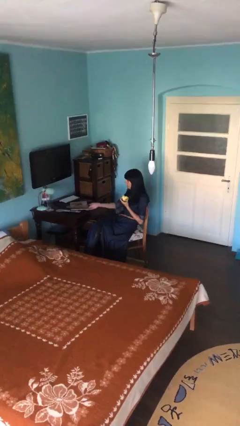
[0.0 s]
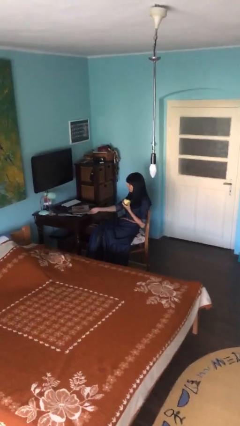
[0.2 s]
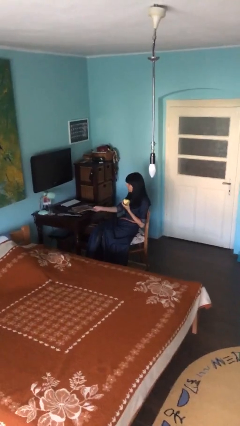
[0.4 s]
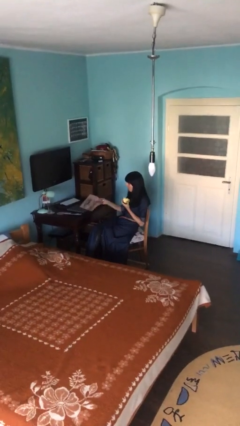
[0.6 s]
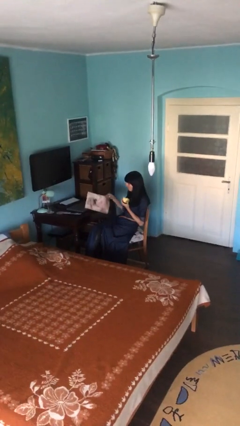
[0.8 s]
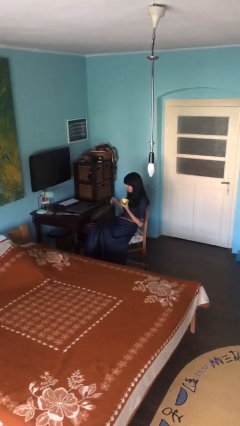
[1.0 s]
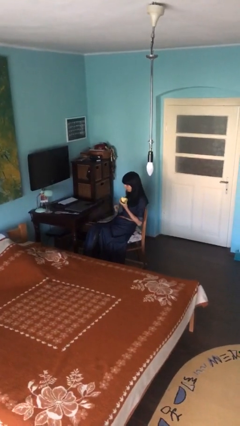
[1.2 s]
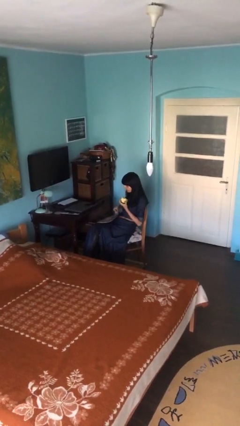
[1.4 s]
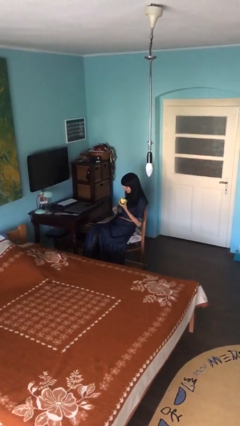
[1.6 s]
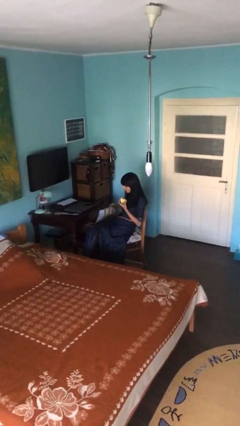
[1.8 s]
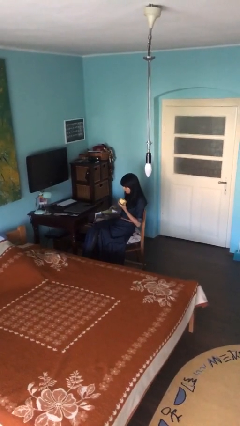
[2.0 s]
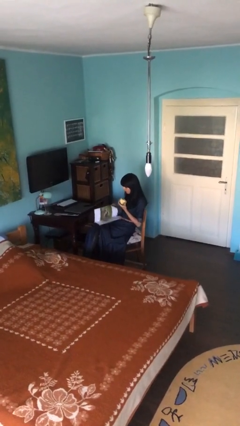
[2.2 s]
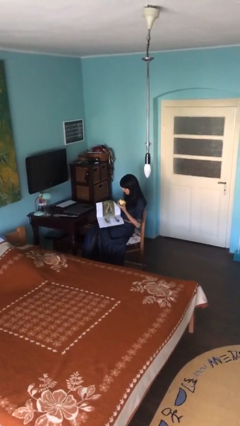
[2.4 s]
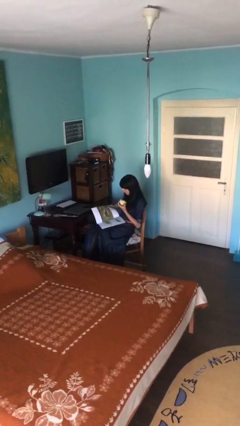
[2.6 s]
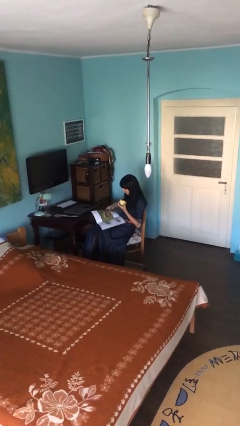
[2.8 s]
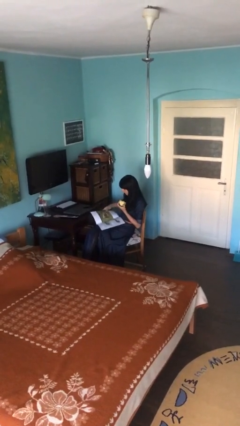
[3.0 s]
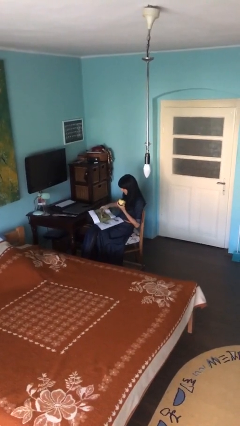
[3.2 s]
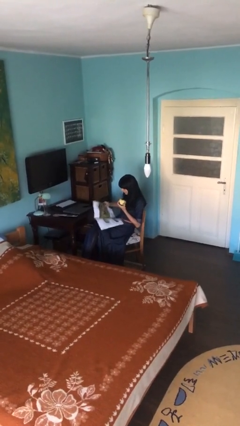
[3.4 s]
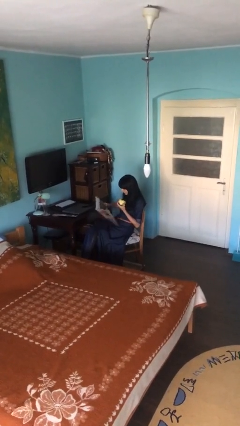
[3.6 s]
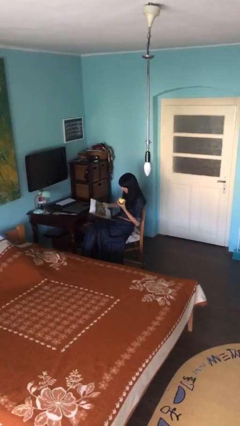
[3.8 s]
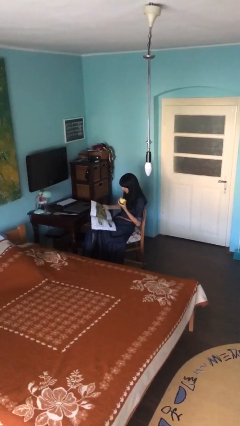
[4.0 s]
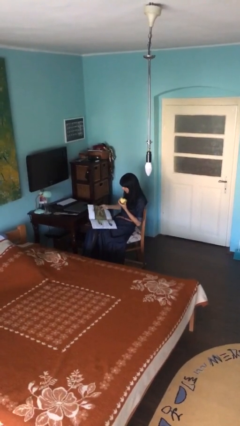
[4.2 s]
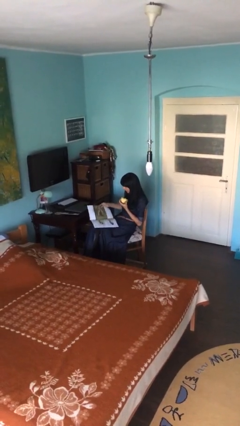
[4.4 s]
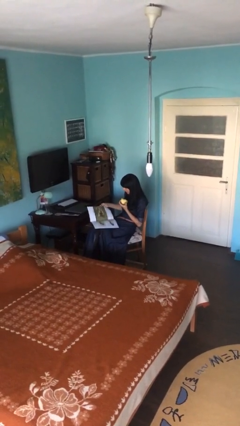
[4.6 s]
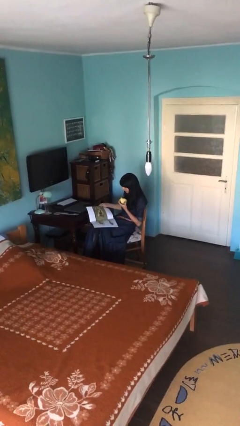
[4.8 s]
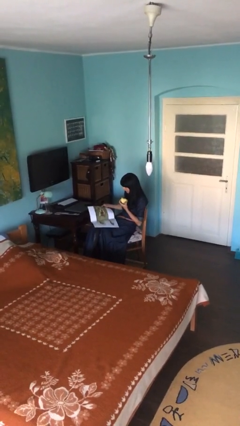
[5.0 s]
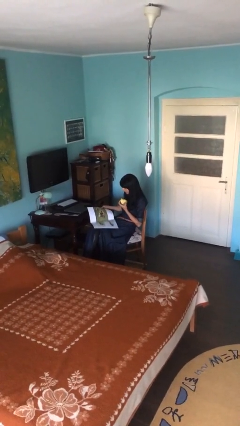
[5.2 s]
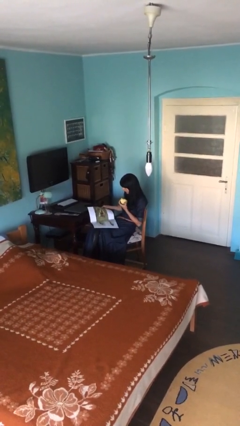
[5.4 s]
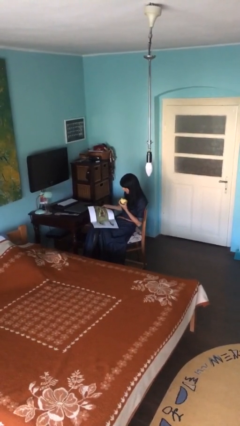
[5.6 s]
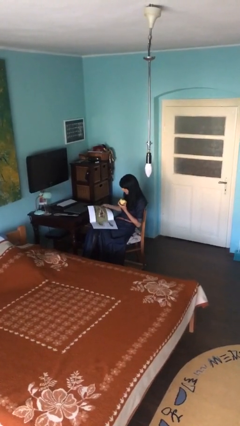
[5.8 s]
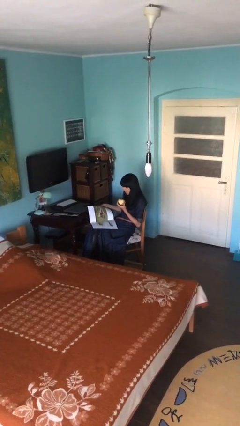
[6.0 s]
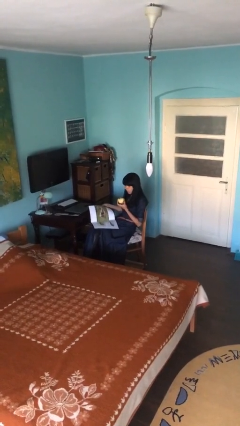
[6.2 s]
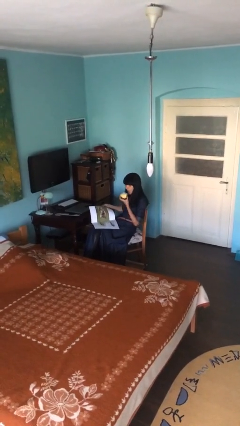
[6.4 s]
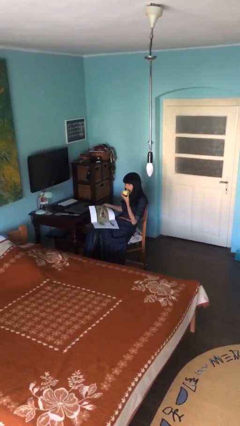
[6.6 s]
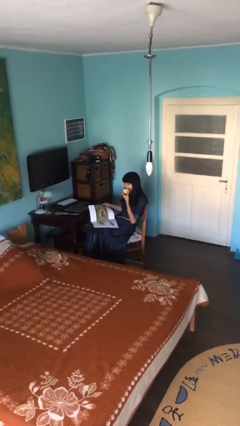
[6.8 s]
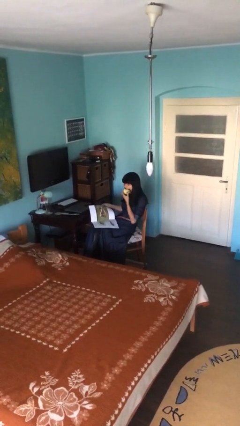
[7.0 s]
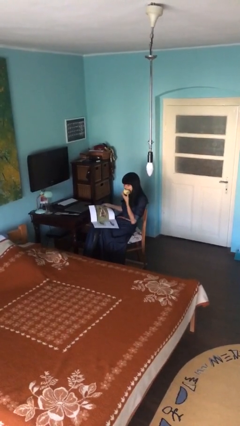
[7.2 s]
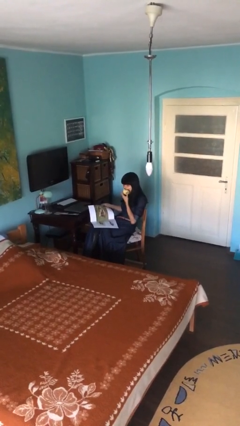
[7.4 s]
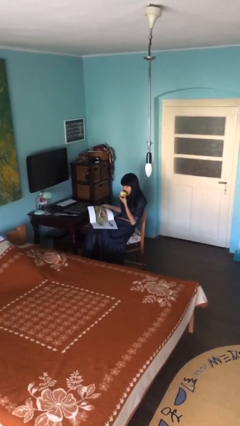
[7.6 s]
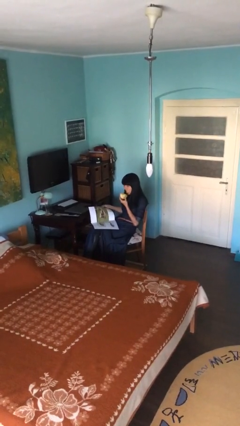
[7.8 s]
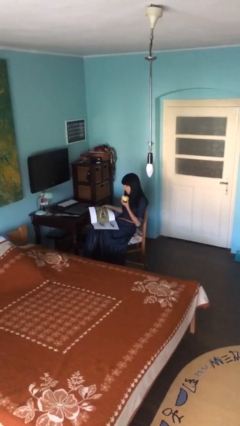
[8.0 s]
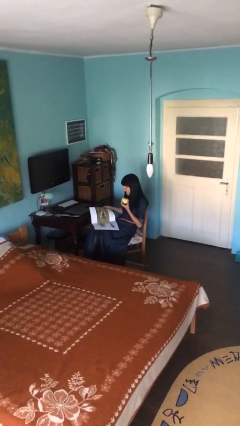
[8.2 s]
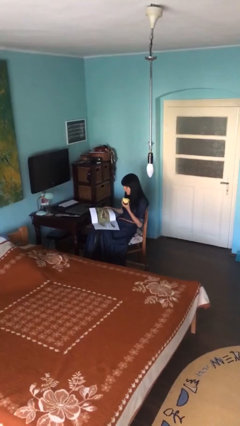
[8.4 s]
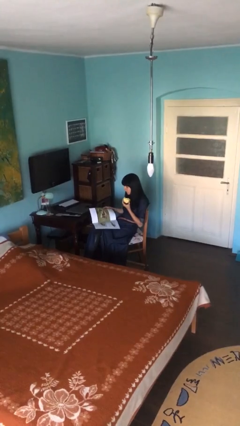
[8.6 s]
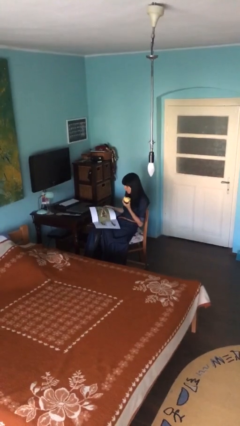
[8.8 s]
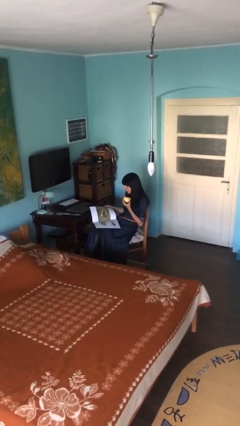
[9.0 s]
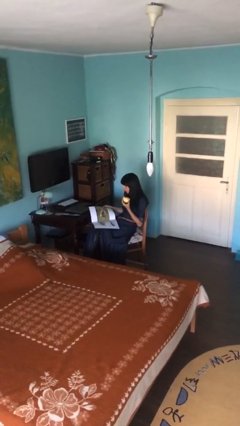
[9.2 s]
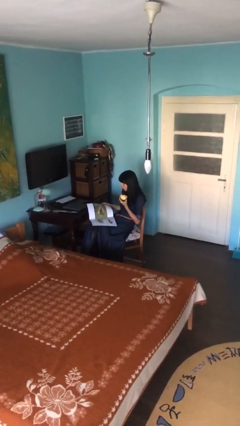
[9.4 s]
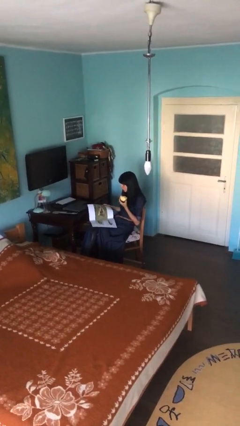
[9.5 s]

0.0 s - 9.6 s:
person reads document

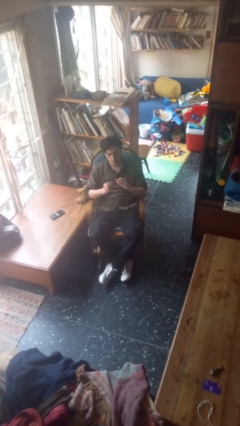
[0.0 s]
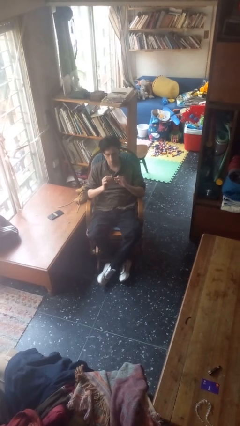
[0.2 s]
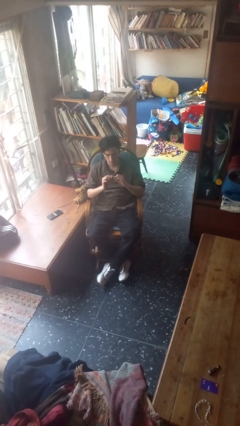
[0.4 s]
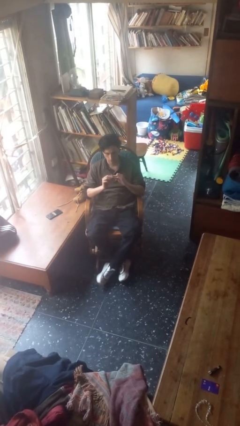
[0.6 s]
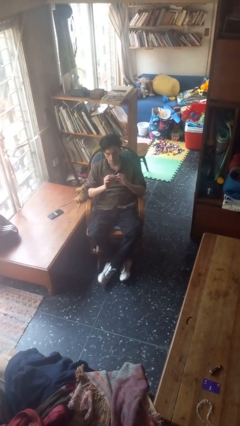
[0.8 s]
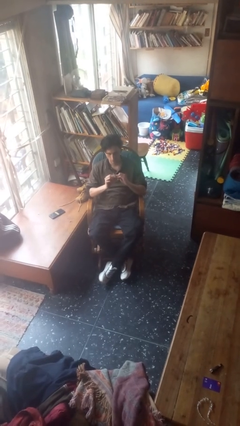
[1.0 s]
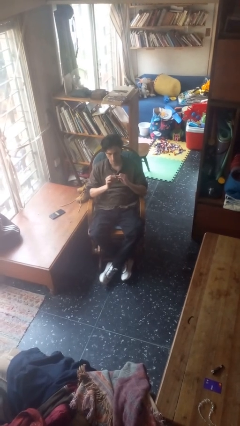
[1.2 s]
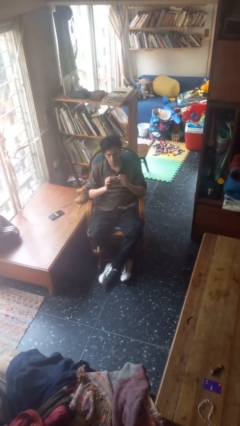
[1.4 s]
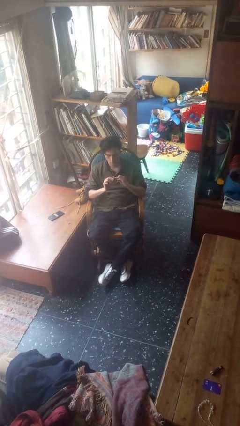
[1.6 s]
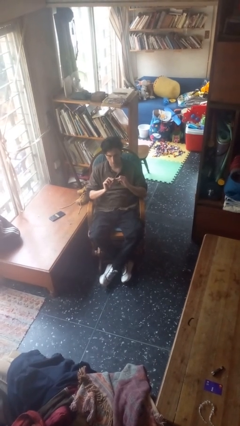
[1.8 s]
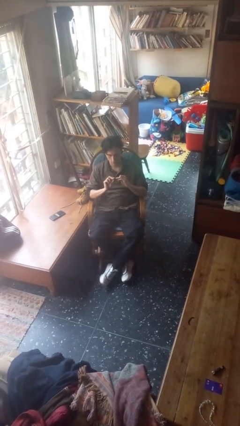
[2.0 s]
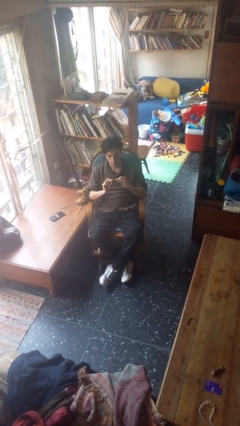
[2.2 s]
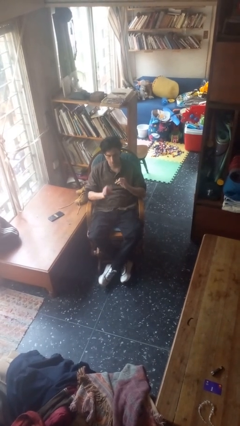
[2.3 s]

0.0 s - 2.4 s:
person files fingernails

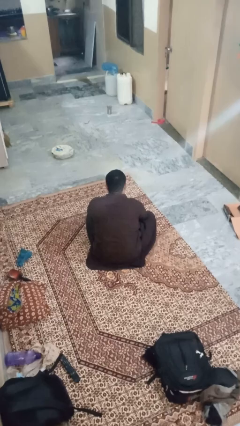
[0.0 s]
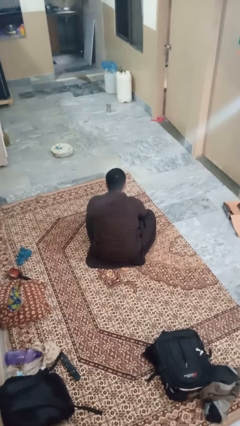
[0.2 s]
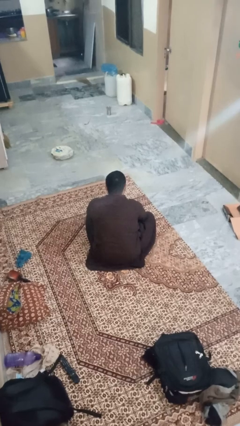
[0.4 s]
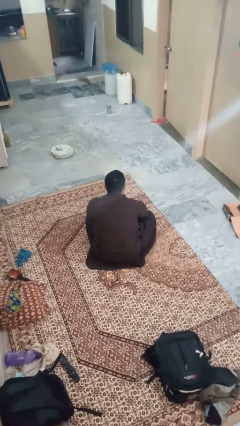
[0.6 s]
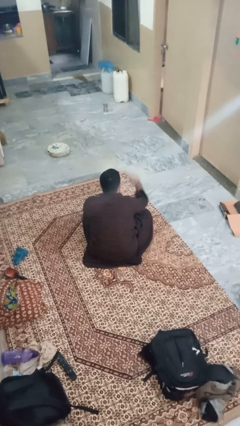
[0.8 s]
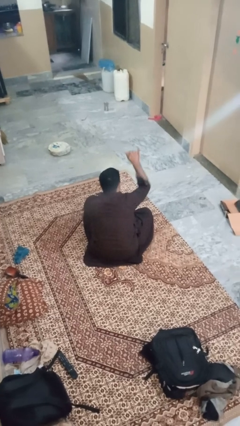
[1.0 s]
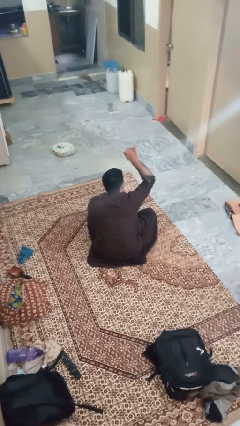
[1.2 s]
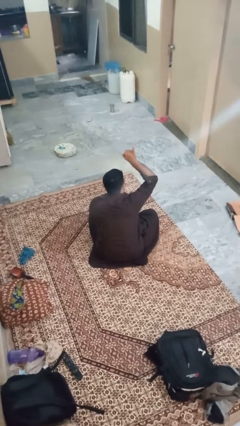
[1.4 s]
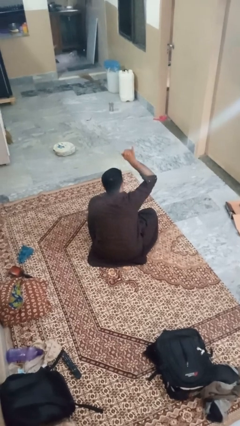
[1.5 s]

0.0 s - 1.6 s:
person gestures hang loose

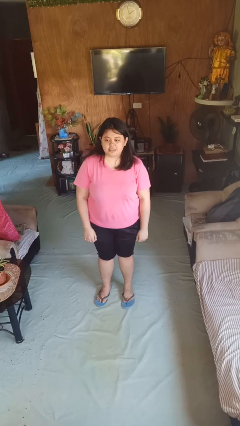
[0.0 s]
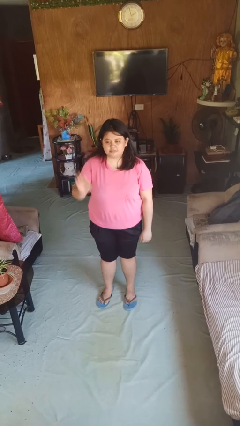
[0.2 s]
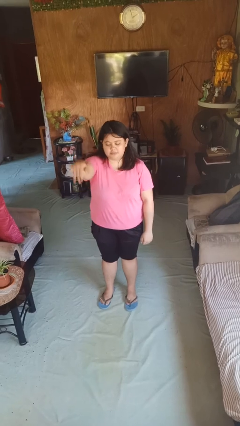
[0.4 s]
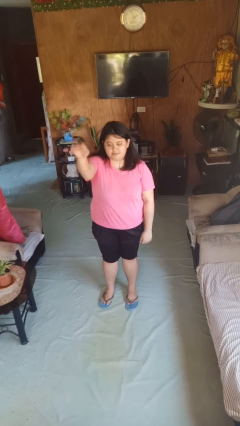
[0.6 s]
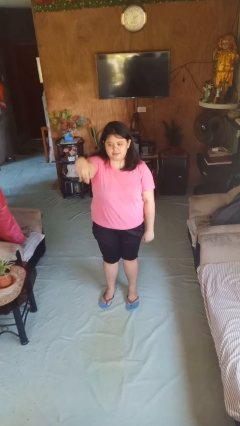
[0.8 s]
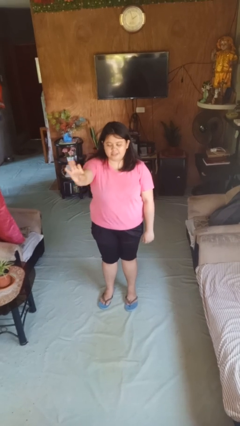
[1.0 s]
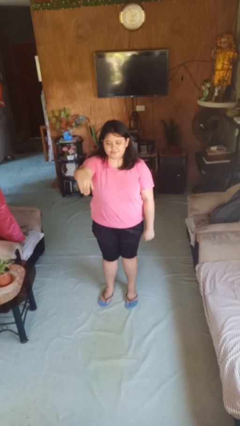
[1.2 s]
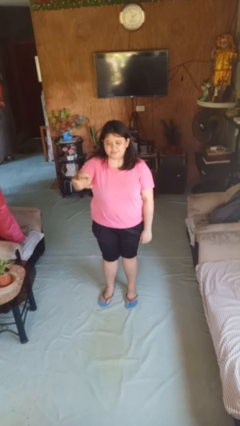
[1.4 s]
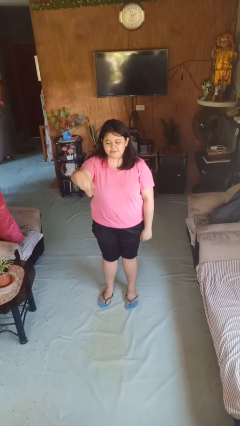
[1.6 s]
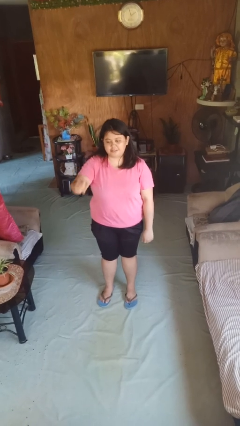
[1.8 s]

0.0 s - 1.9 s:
person gestures come here

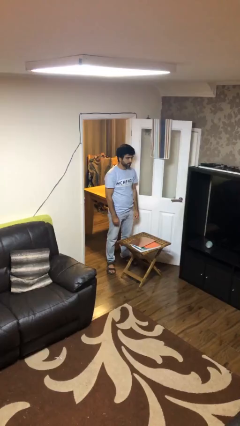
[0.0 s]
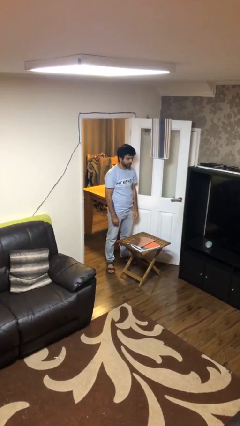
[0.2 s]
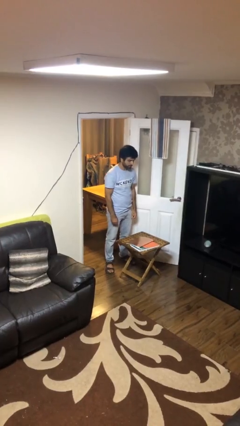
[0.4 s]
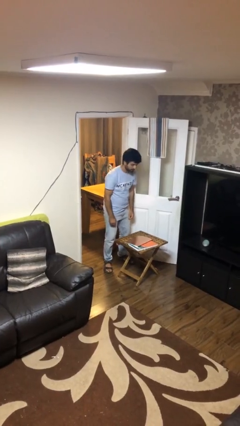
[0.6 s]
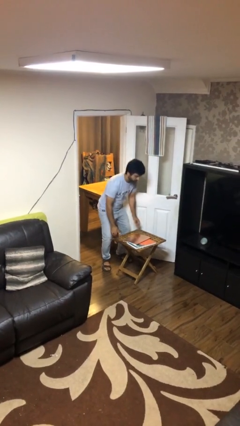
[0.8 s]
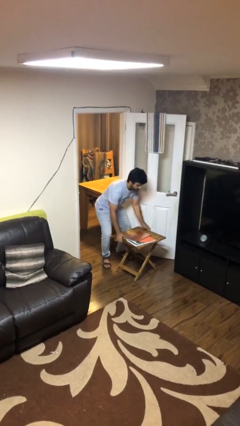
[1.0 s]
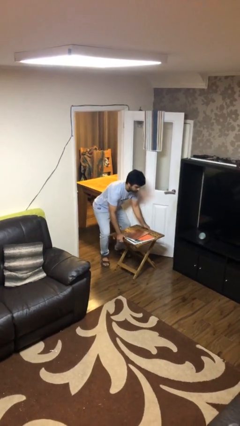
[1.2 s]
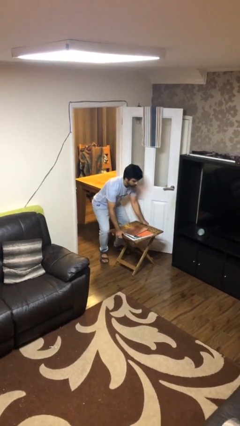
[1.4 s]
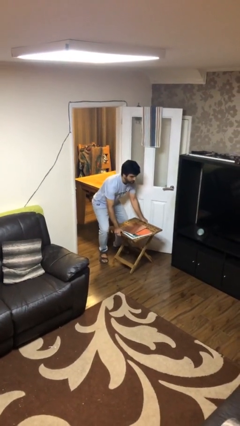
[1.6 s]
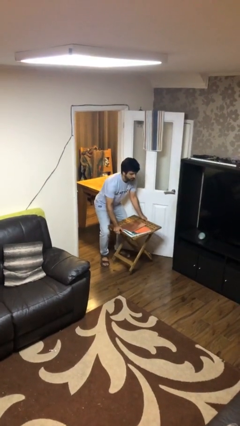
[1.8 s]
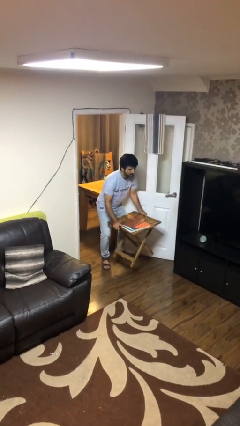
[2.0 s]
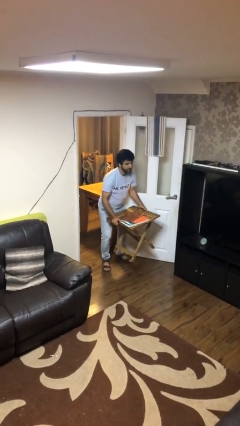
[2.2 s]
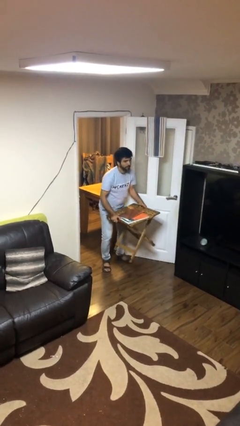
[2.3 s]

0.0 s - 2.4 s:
person picks up object from floor
